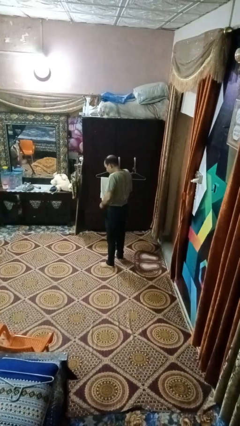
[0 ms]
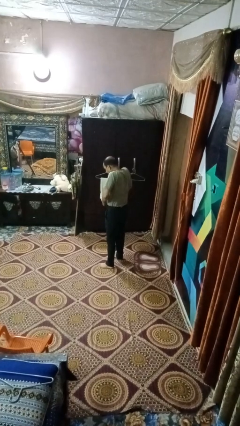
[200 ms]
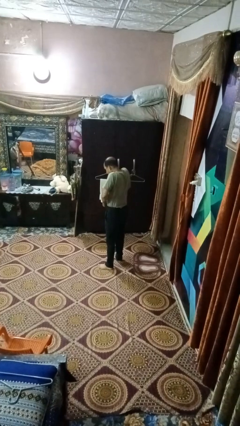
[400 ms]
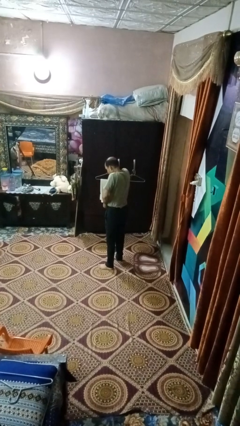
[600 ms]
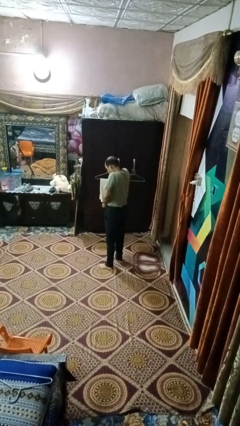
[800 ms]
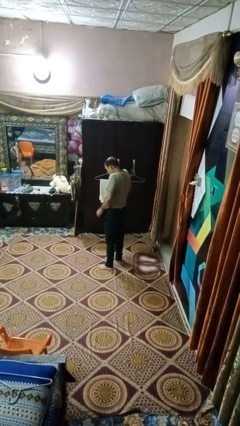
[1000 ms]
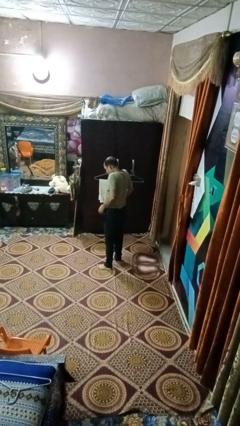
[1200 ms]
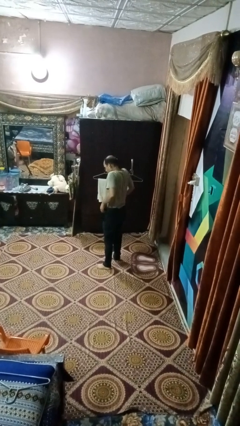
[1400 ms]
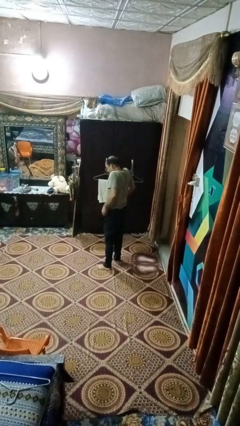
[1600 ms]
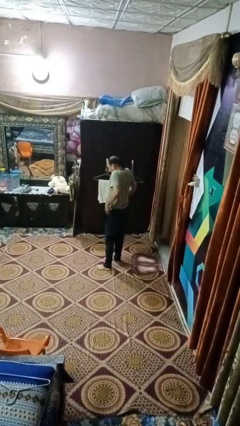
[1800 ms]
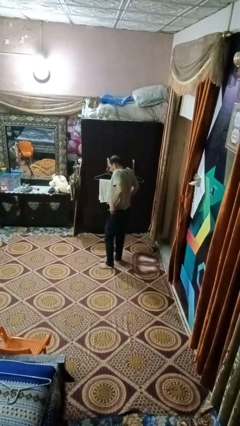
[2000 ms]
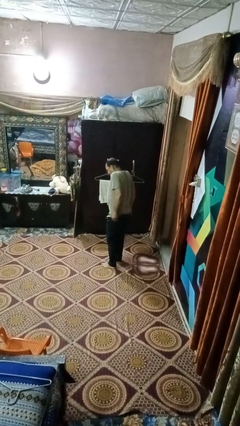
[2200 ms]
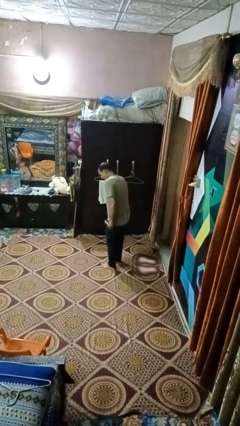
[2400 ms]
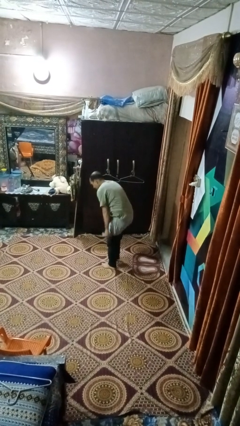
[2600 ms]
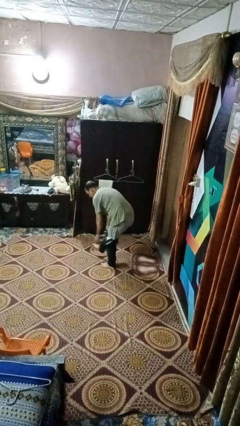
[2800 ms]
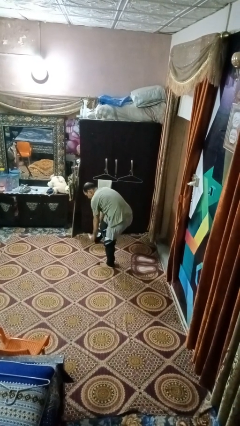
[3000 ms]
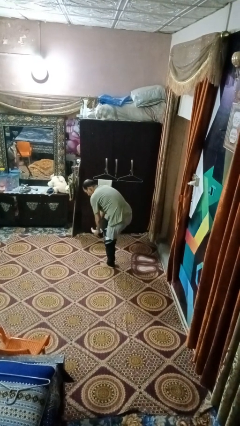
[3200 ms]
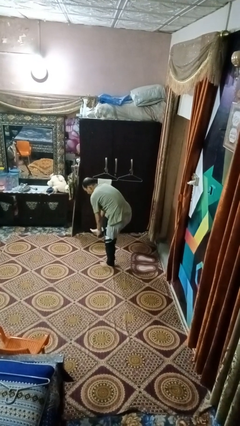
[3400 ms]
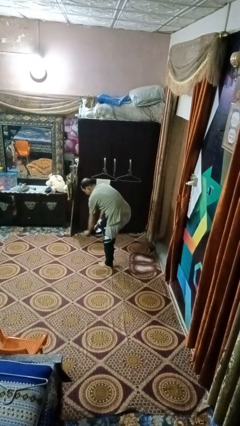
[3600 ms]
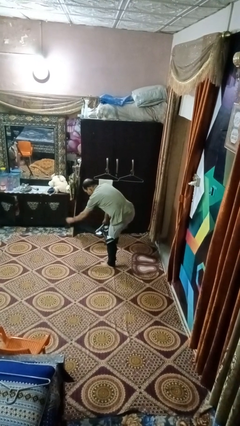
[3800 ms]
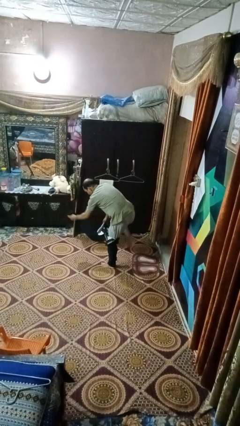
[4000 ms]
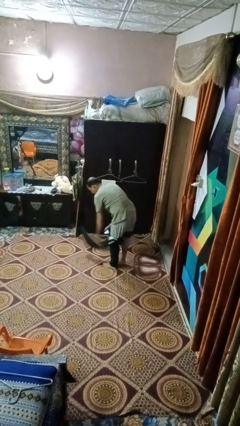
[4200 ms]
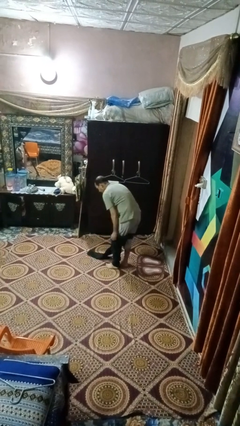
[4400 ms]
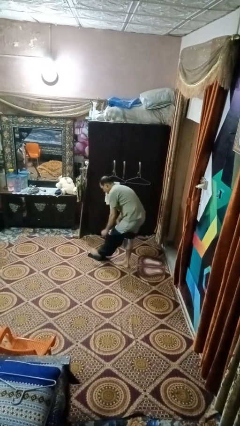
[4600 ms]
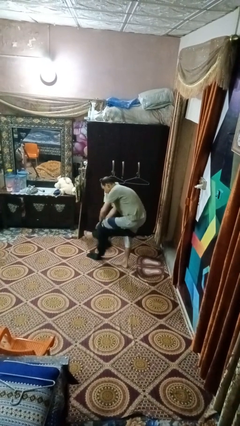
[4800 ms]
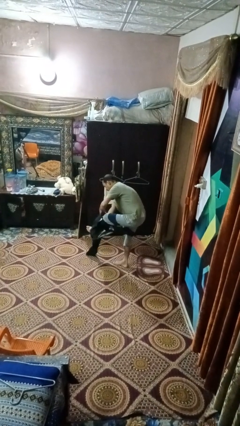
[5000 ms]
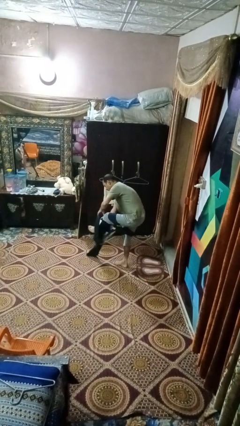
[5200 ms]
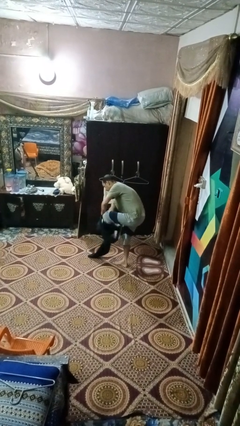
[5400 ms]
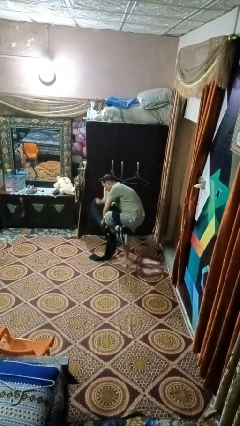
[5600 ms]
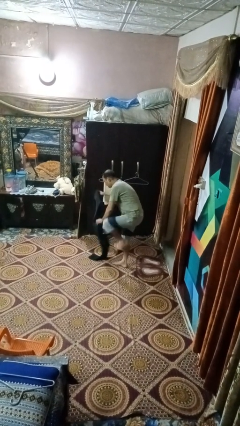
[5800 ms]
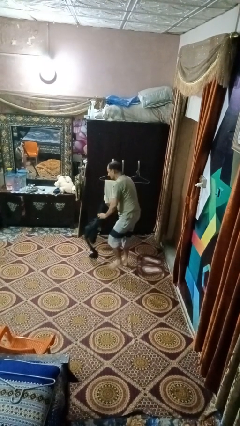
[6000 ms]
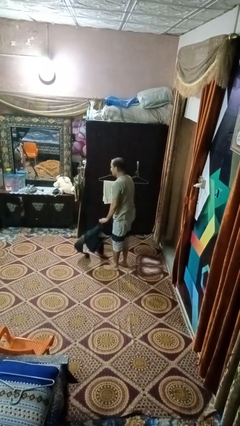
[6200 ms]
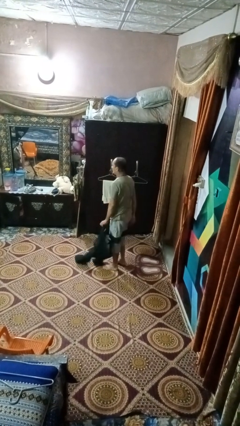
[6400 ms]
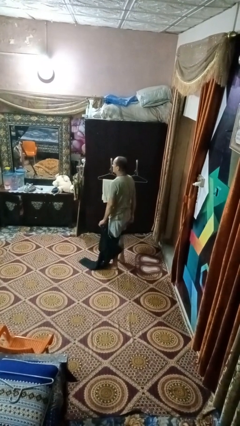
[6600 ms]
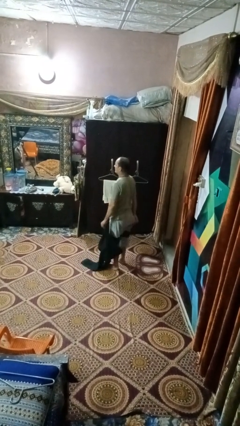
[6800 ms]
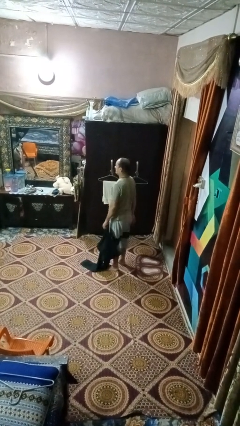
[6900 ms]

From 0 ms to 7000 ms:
person takes off pants

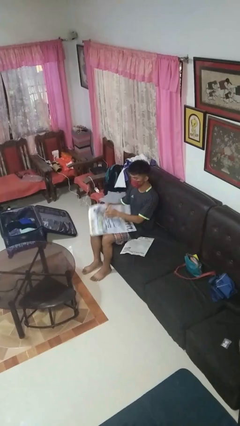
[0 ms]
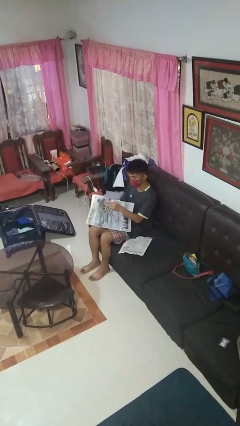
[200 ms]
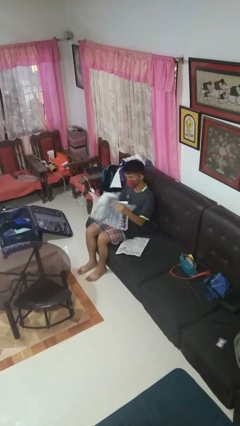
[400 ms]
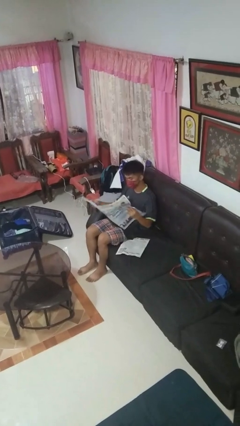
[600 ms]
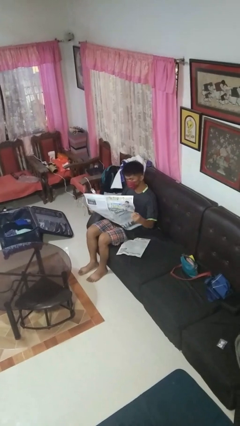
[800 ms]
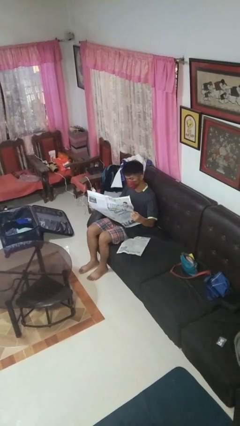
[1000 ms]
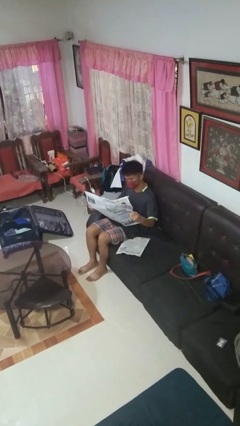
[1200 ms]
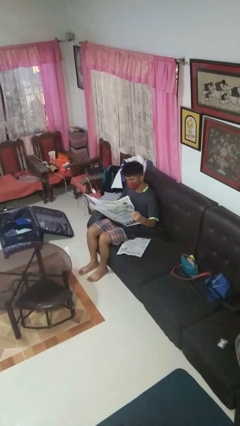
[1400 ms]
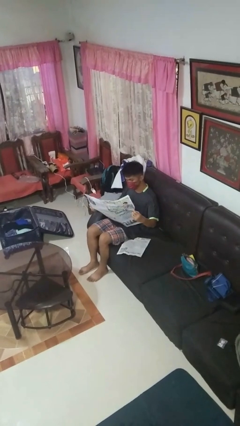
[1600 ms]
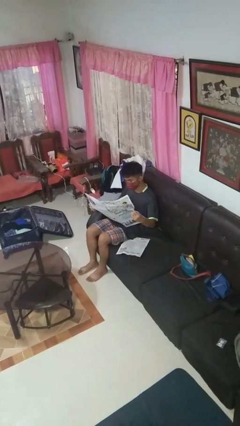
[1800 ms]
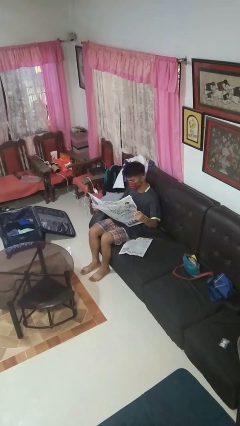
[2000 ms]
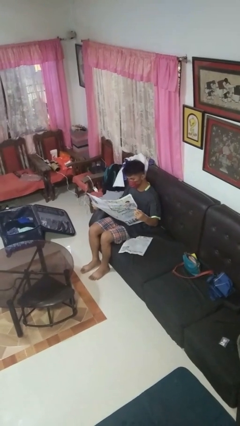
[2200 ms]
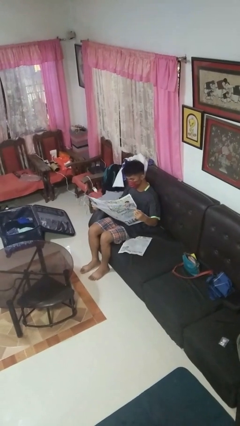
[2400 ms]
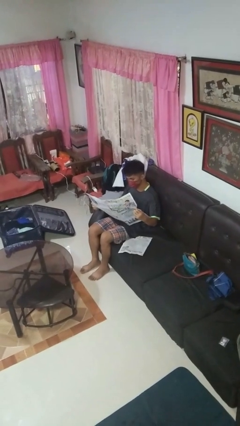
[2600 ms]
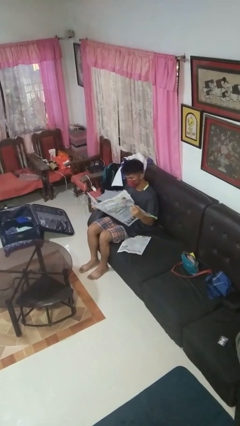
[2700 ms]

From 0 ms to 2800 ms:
person reads newspaper

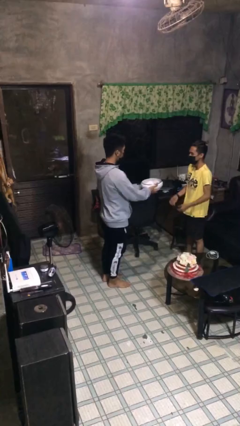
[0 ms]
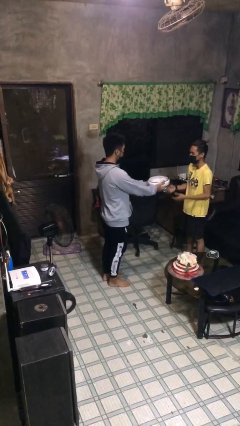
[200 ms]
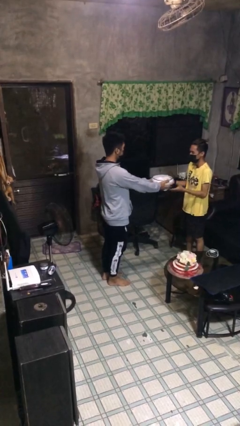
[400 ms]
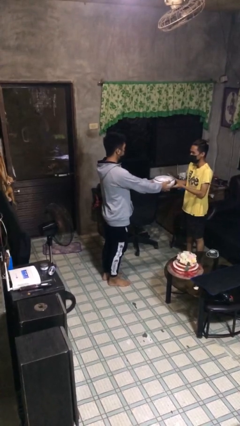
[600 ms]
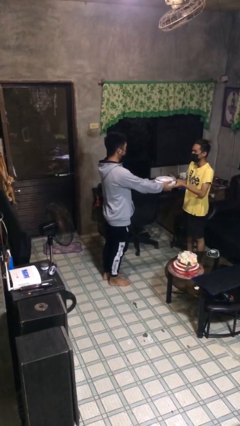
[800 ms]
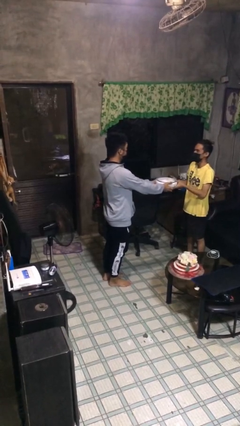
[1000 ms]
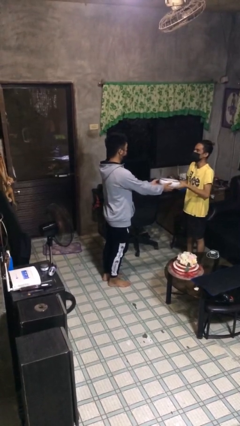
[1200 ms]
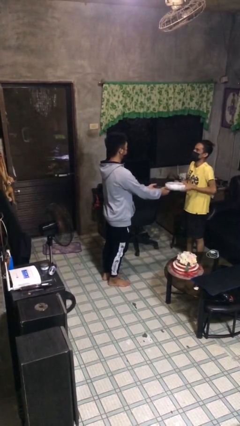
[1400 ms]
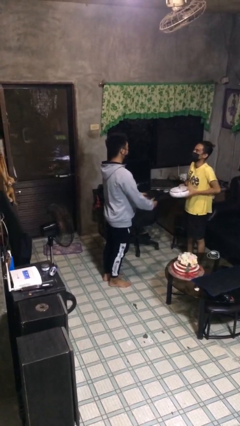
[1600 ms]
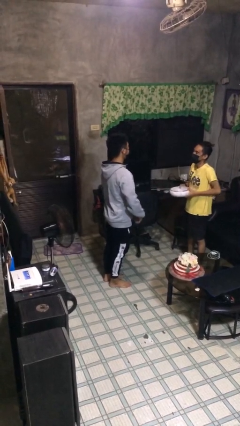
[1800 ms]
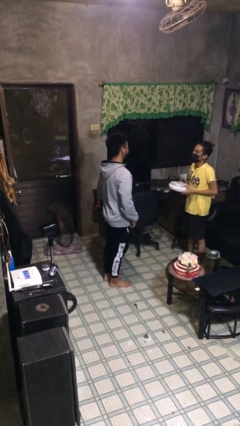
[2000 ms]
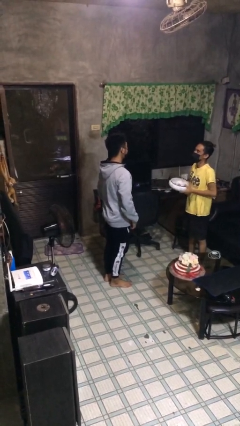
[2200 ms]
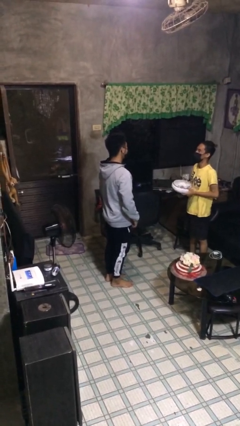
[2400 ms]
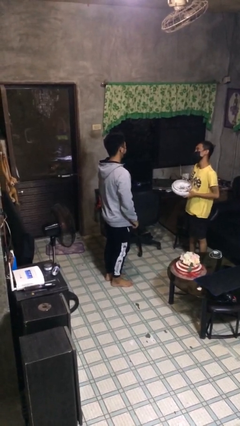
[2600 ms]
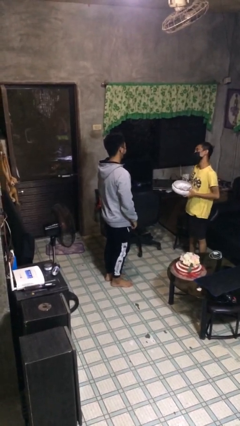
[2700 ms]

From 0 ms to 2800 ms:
person transfers object to person

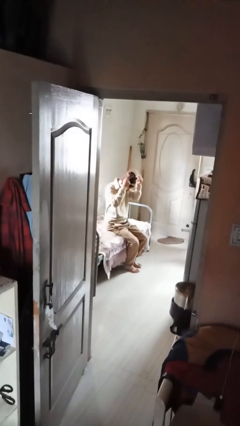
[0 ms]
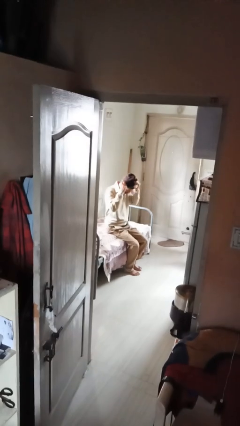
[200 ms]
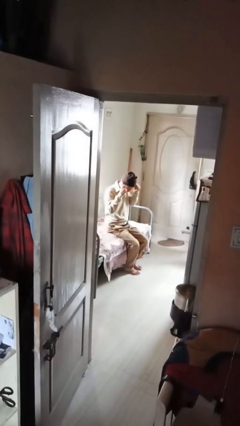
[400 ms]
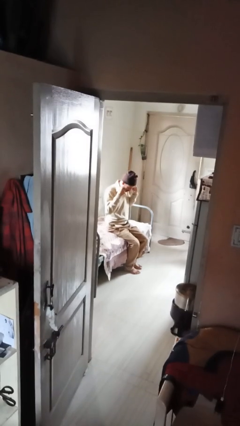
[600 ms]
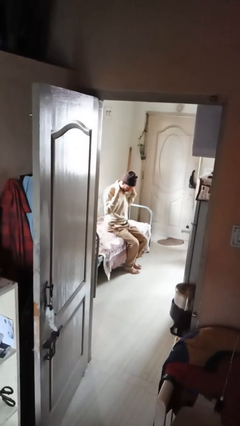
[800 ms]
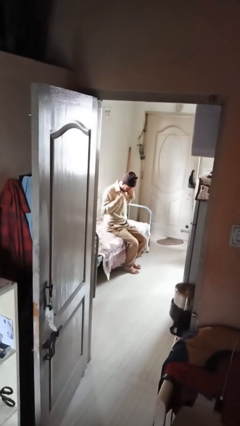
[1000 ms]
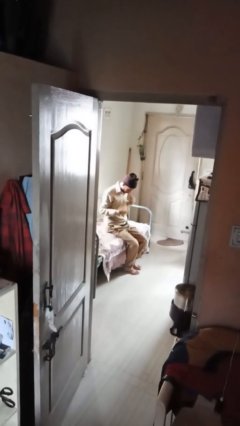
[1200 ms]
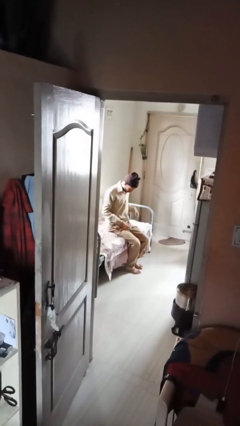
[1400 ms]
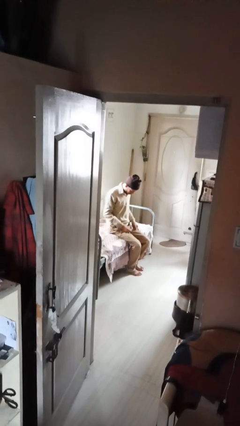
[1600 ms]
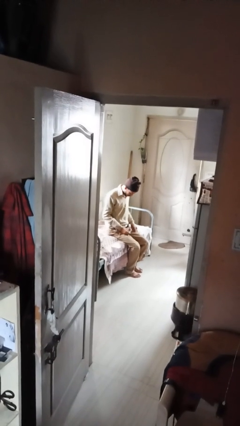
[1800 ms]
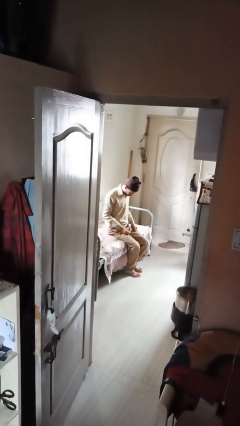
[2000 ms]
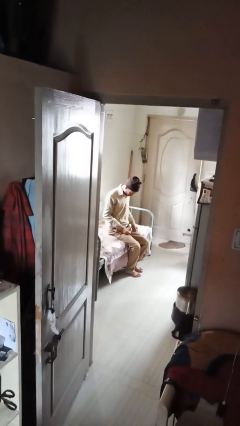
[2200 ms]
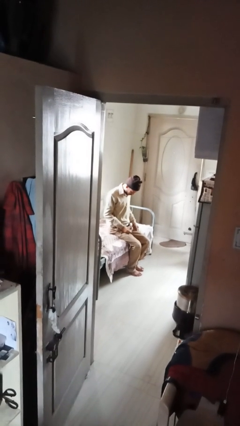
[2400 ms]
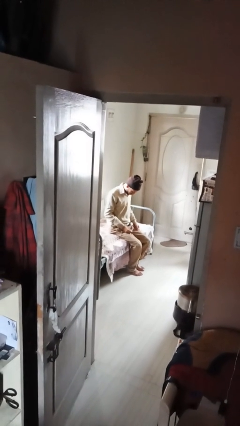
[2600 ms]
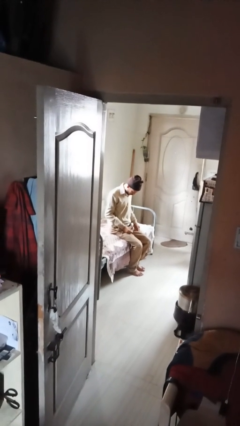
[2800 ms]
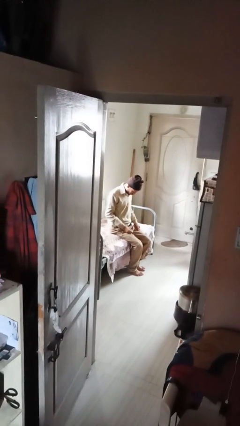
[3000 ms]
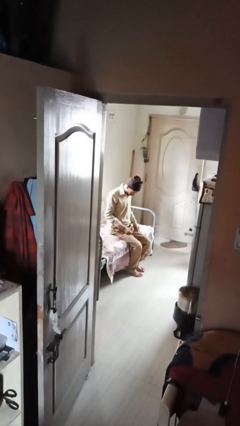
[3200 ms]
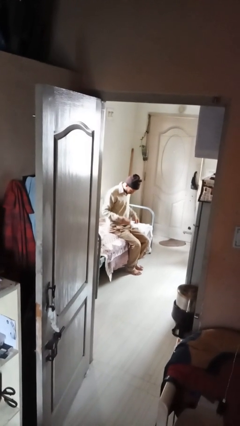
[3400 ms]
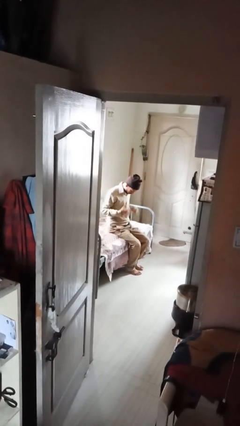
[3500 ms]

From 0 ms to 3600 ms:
person puts on necklace

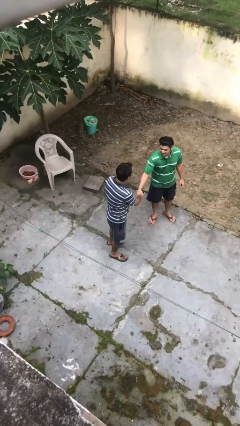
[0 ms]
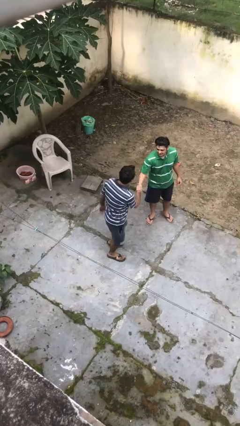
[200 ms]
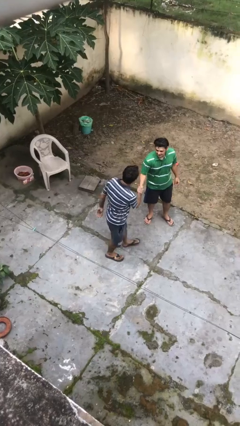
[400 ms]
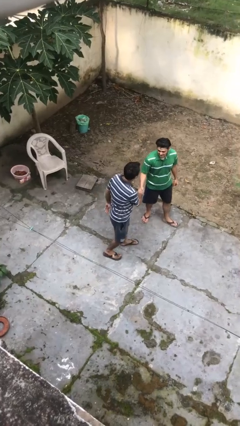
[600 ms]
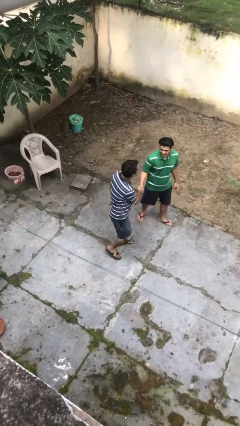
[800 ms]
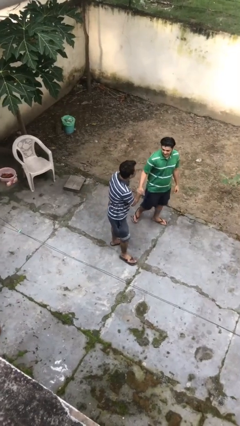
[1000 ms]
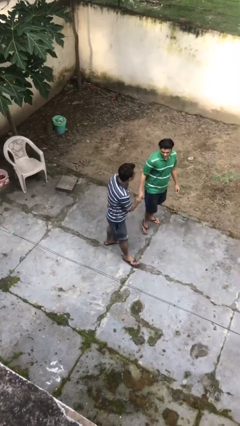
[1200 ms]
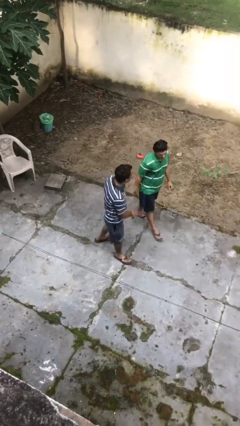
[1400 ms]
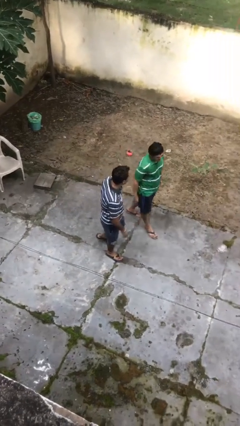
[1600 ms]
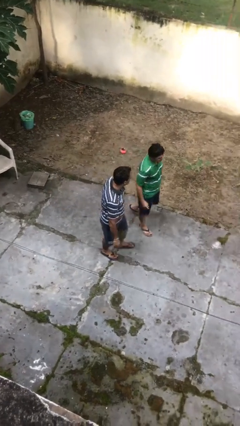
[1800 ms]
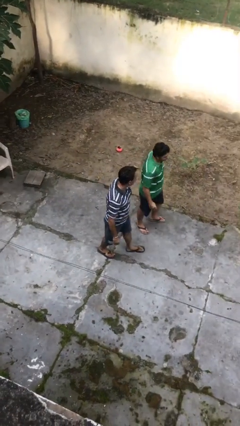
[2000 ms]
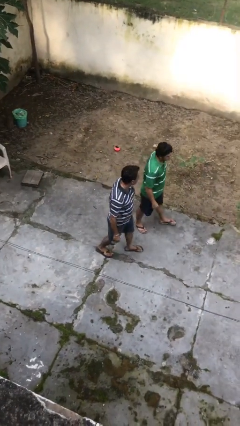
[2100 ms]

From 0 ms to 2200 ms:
person shakes hand
